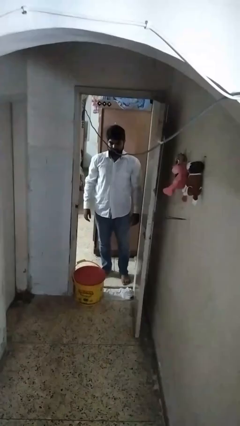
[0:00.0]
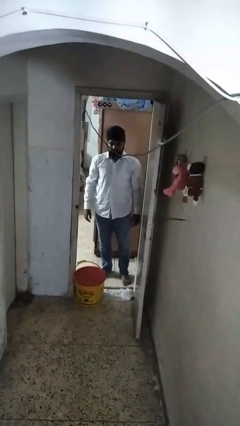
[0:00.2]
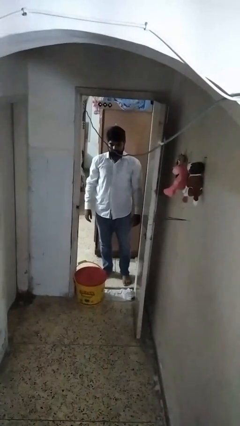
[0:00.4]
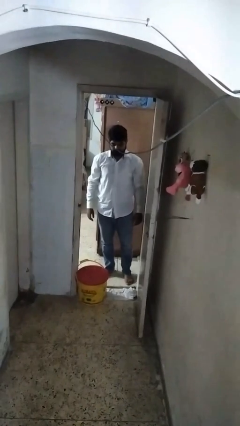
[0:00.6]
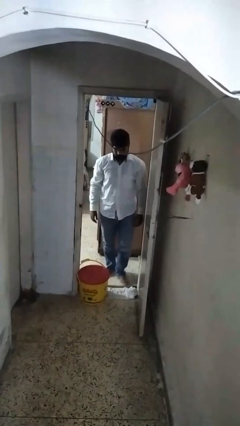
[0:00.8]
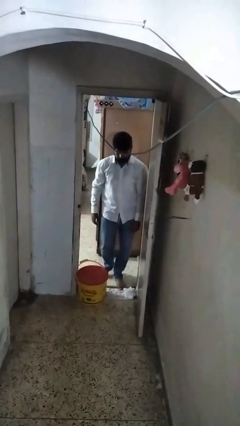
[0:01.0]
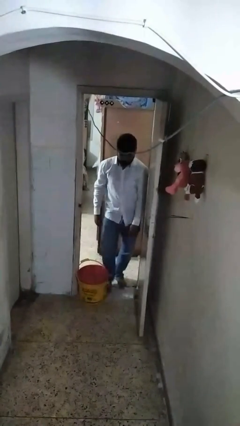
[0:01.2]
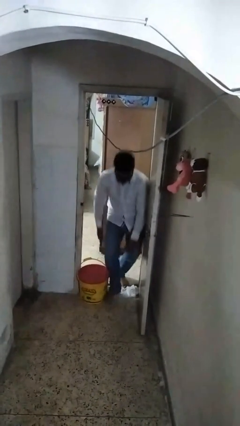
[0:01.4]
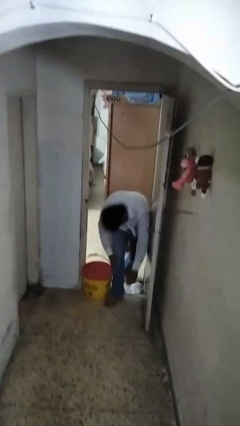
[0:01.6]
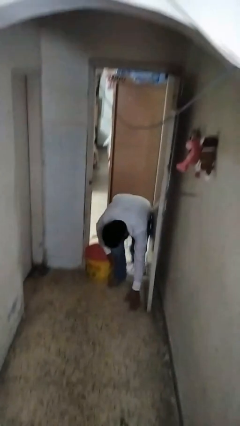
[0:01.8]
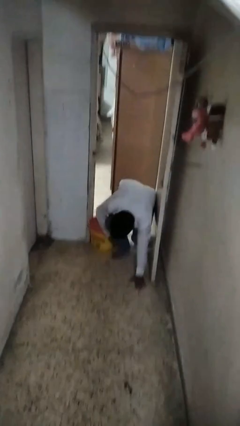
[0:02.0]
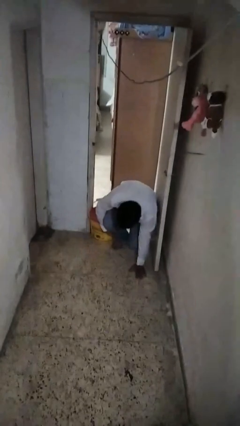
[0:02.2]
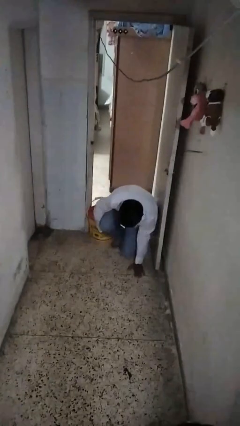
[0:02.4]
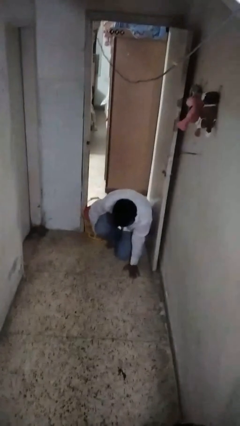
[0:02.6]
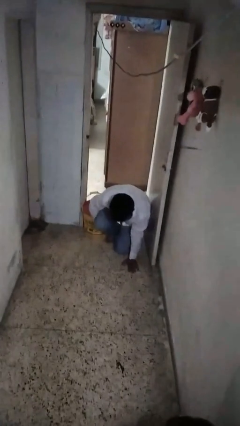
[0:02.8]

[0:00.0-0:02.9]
person trips on object on floor

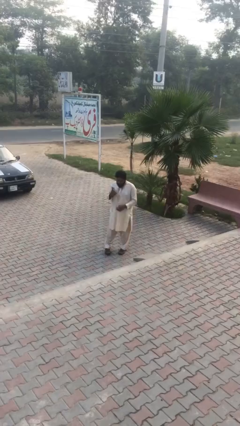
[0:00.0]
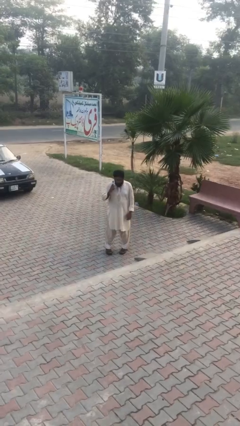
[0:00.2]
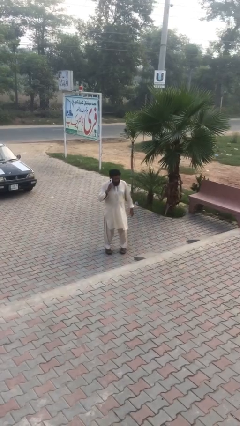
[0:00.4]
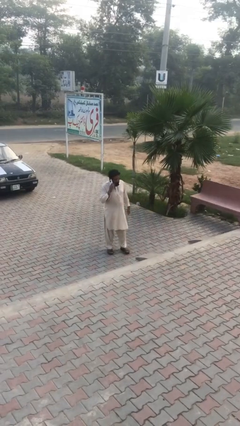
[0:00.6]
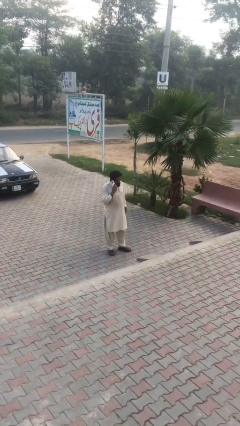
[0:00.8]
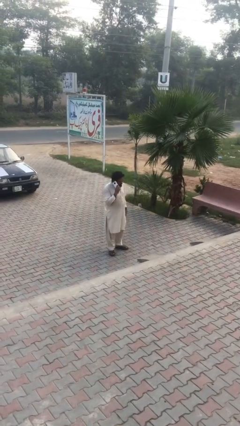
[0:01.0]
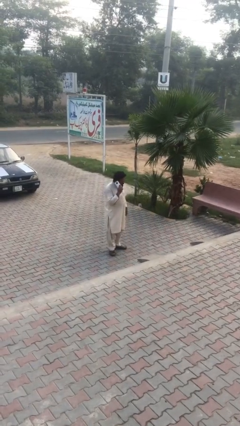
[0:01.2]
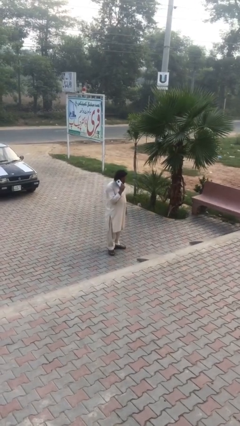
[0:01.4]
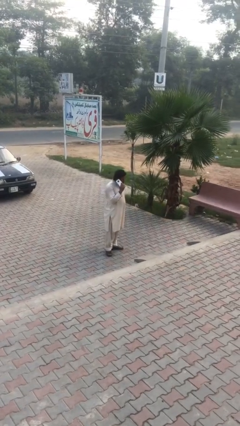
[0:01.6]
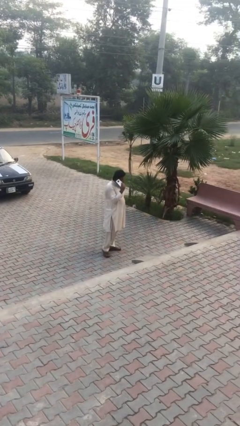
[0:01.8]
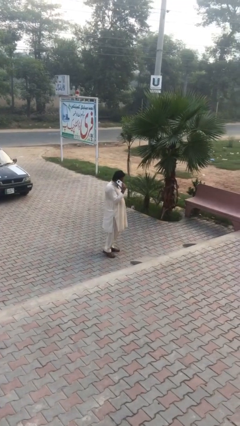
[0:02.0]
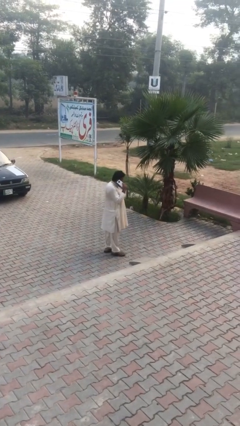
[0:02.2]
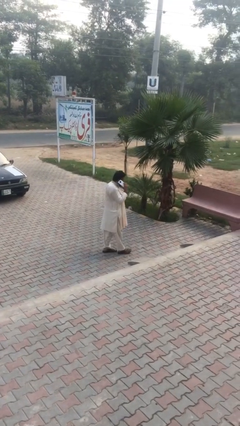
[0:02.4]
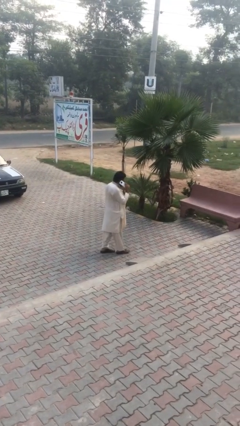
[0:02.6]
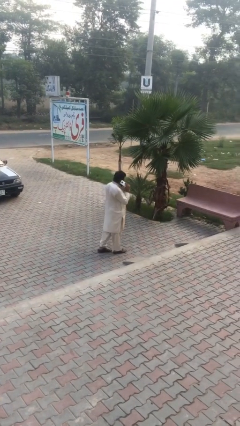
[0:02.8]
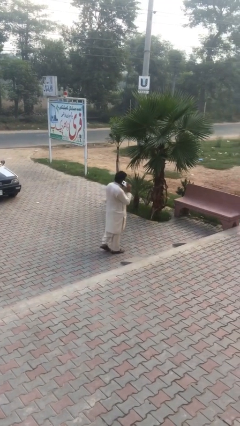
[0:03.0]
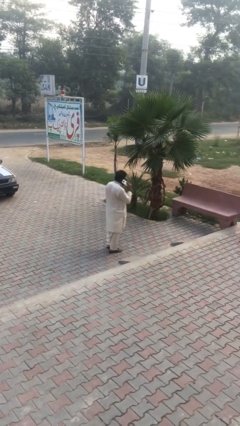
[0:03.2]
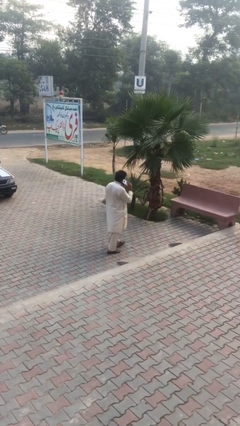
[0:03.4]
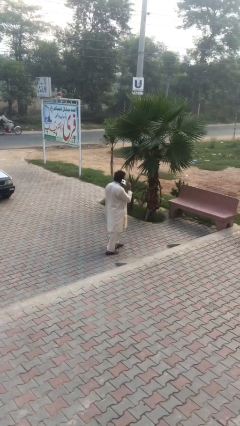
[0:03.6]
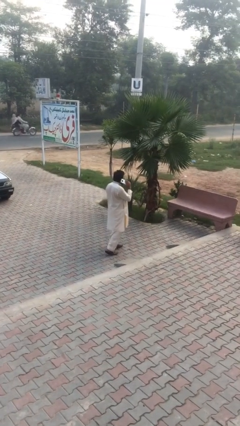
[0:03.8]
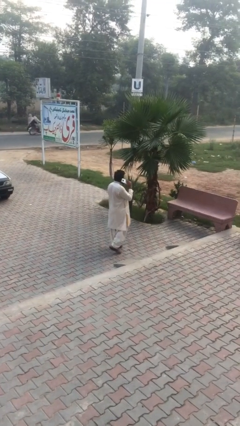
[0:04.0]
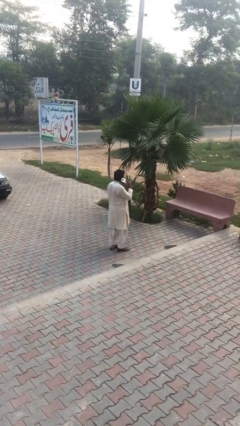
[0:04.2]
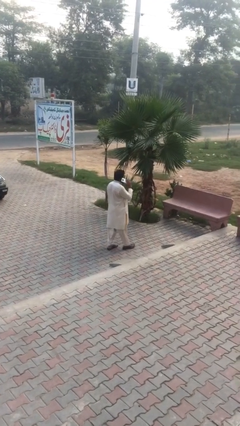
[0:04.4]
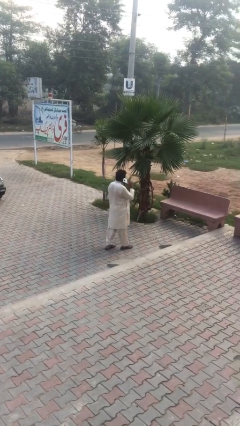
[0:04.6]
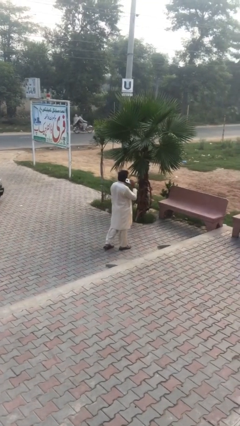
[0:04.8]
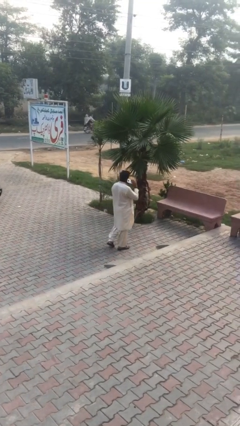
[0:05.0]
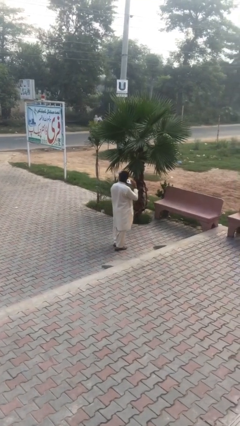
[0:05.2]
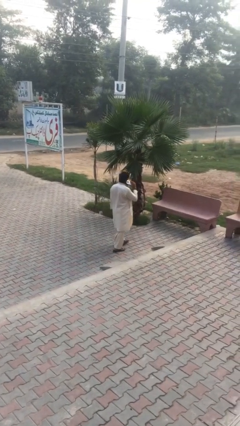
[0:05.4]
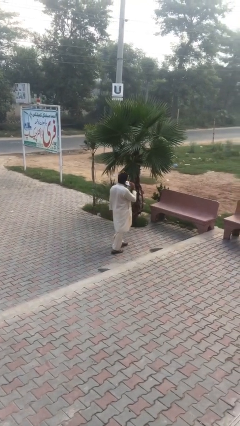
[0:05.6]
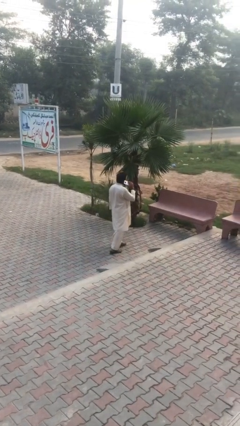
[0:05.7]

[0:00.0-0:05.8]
person talks on phone

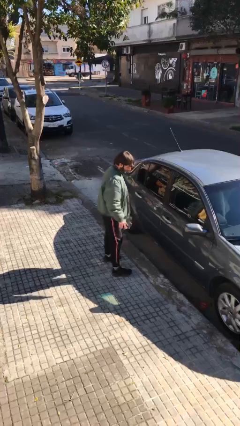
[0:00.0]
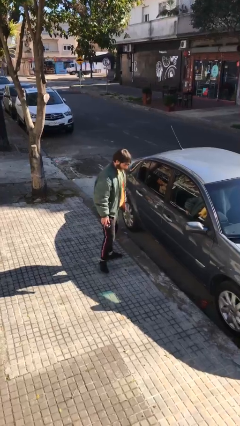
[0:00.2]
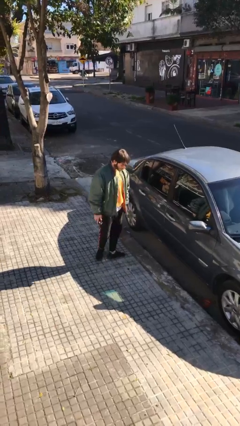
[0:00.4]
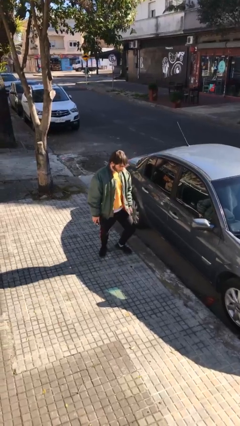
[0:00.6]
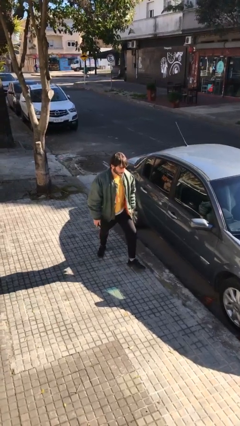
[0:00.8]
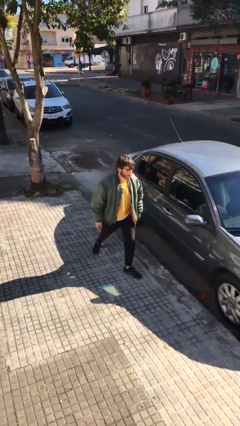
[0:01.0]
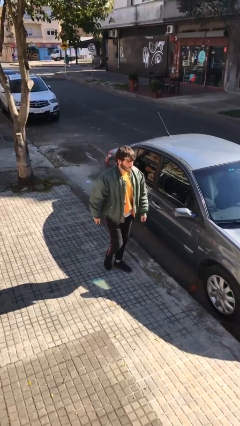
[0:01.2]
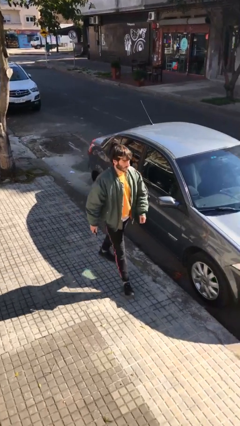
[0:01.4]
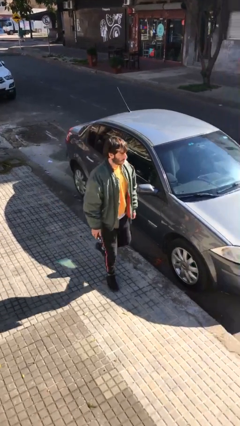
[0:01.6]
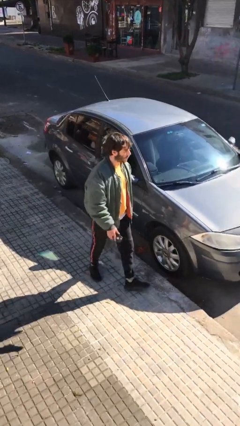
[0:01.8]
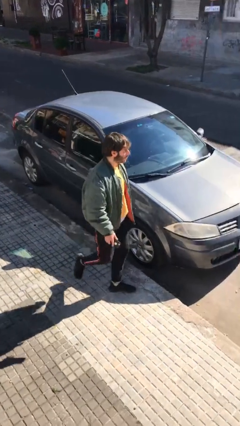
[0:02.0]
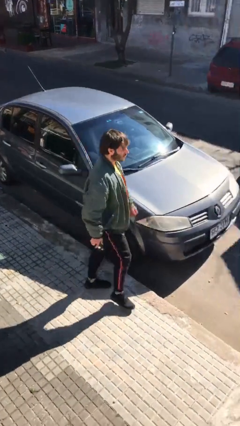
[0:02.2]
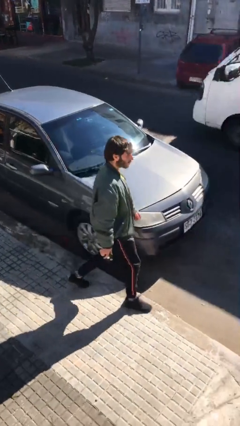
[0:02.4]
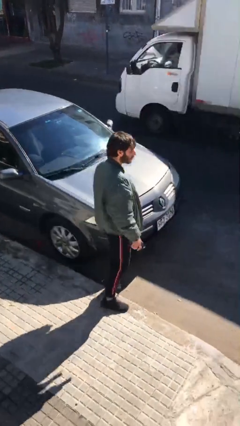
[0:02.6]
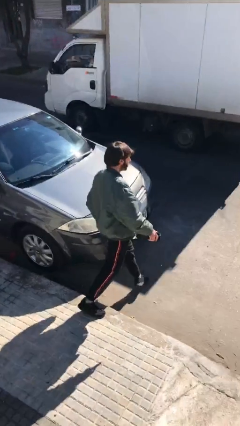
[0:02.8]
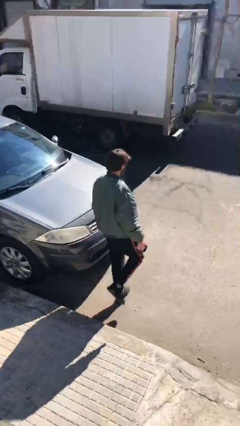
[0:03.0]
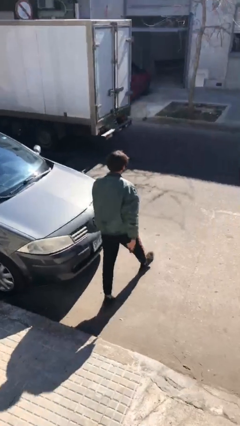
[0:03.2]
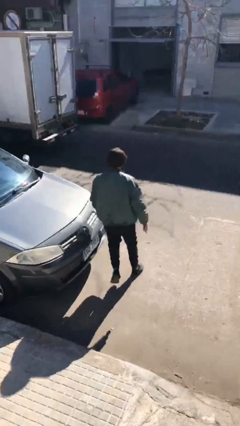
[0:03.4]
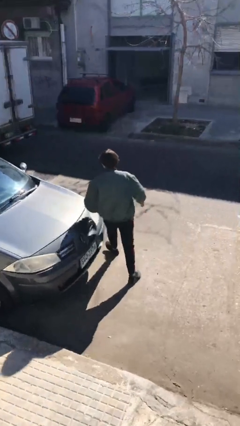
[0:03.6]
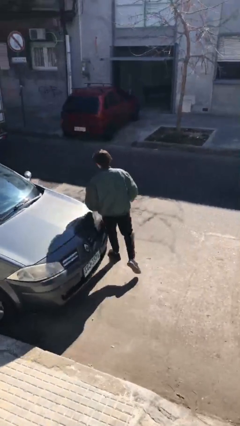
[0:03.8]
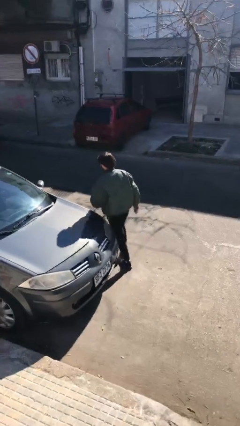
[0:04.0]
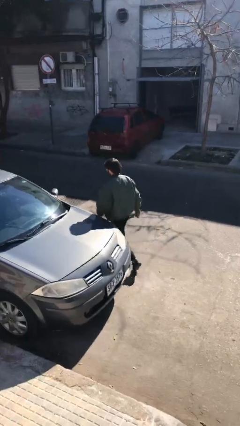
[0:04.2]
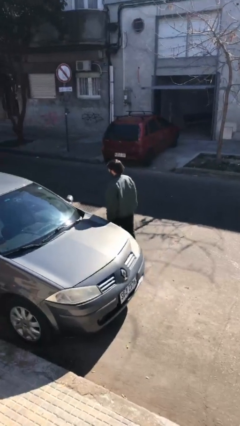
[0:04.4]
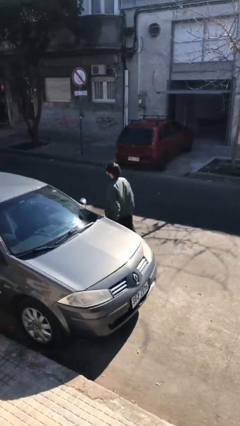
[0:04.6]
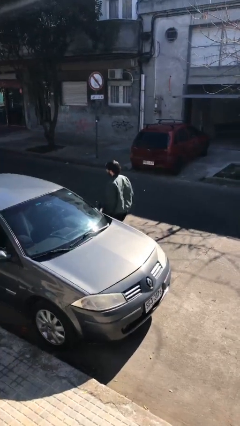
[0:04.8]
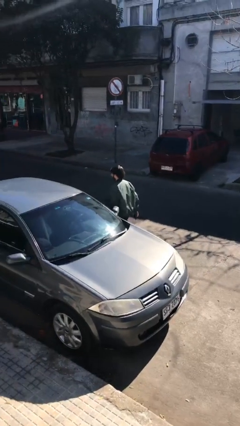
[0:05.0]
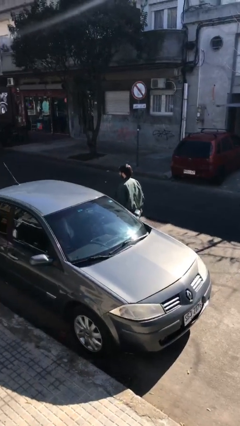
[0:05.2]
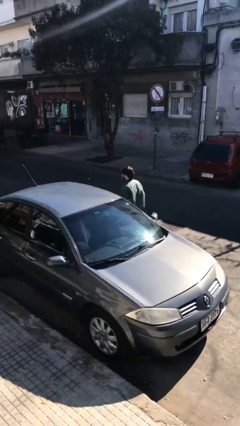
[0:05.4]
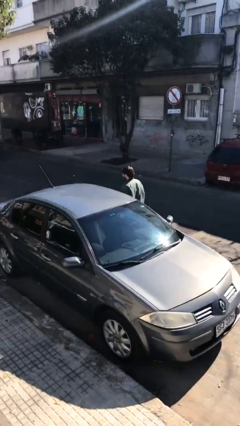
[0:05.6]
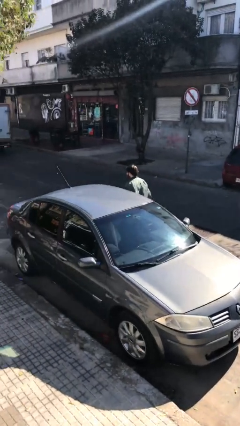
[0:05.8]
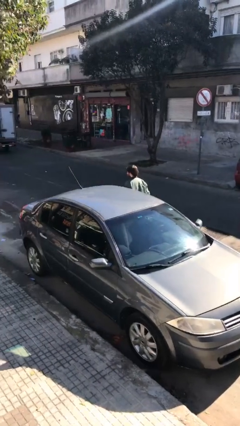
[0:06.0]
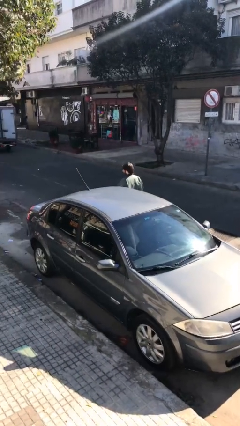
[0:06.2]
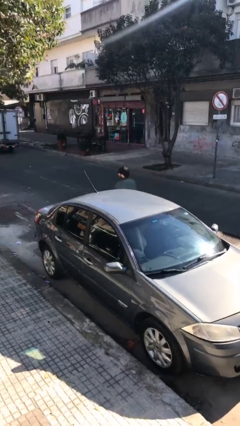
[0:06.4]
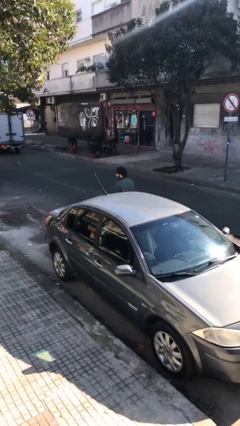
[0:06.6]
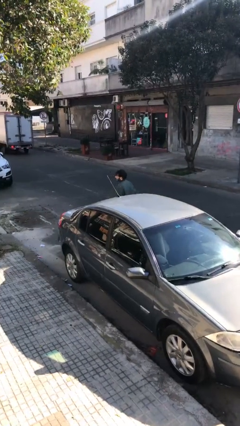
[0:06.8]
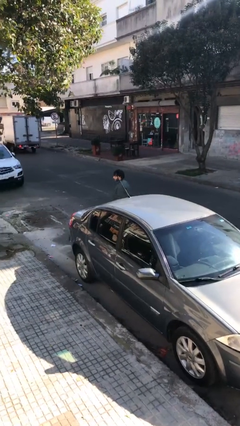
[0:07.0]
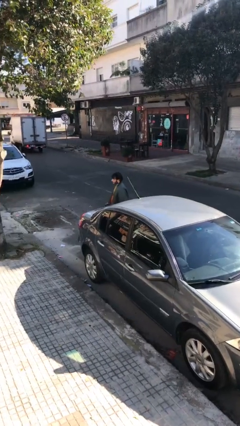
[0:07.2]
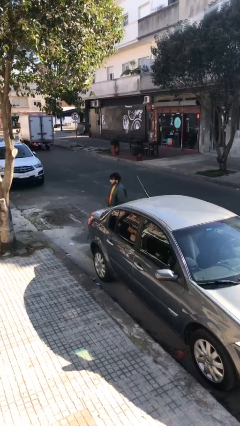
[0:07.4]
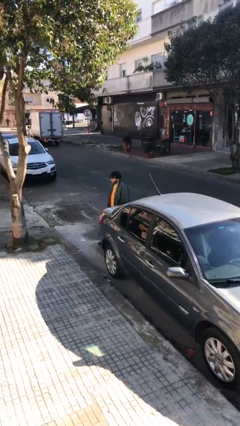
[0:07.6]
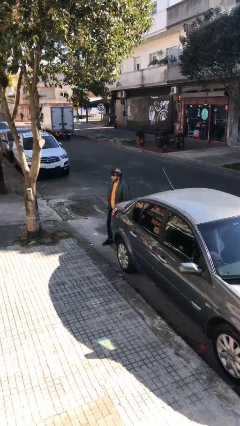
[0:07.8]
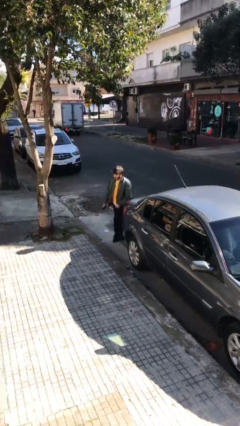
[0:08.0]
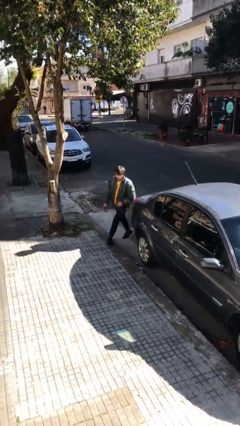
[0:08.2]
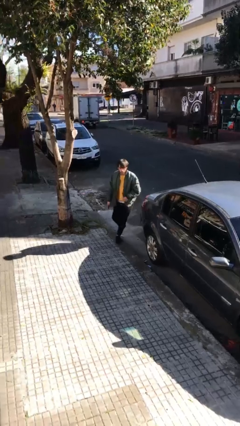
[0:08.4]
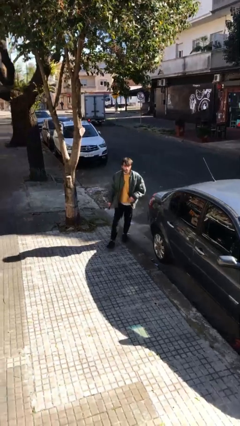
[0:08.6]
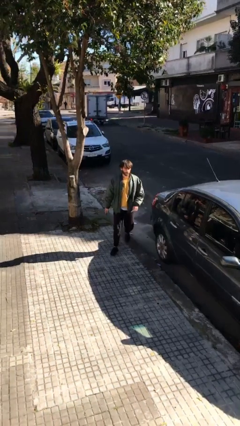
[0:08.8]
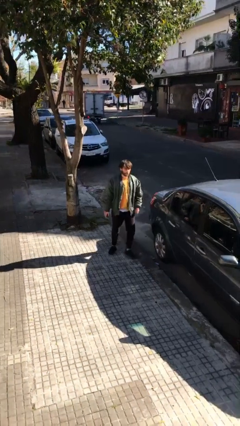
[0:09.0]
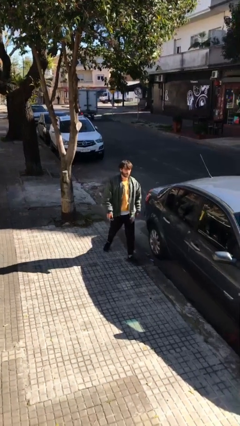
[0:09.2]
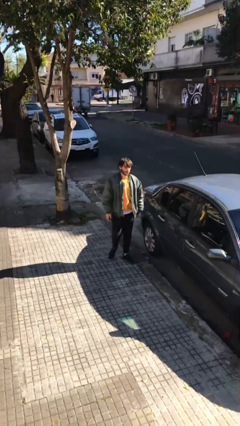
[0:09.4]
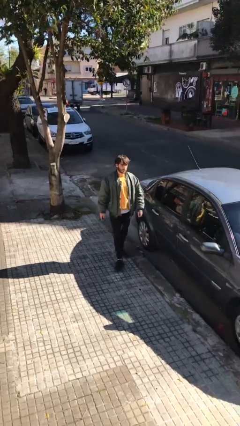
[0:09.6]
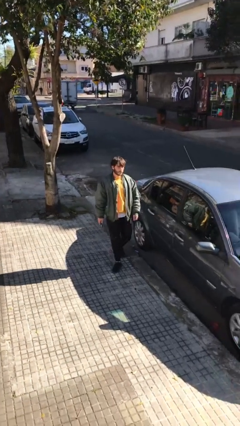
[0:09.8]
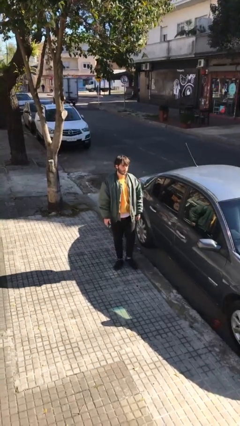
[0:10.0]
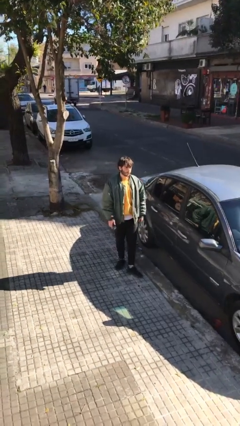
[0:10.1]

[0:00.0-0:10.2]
person walks around car
